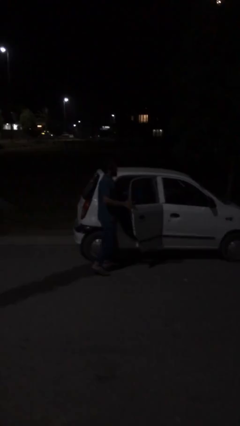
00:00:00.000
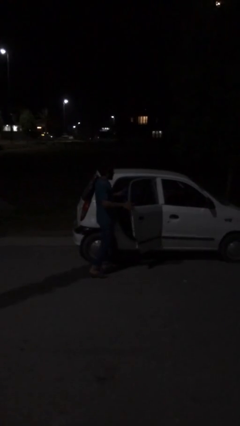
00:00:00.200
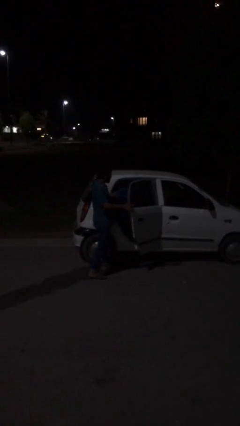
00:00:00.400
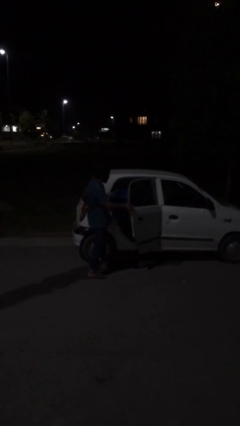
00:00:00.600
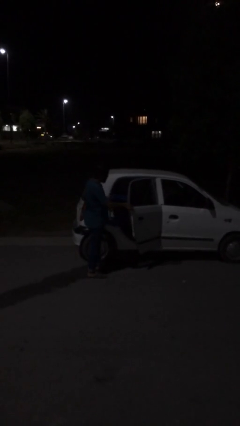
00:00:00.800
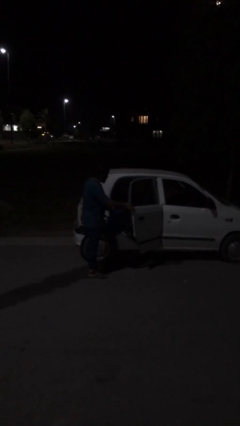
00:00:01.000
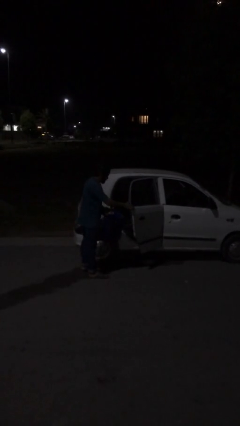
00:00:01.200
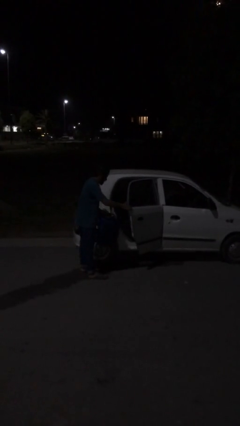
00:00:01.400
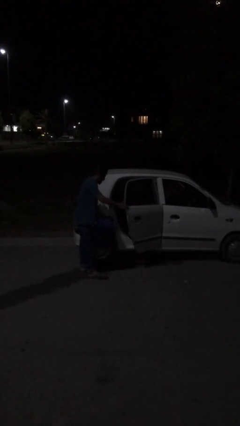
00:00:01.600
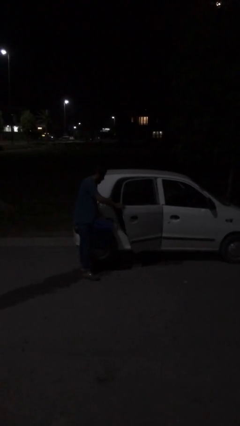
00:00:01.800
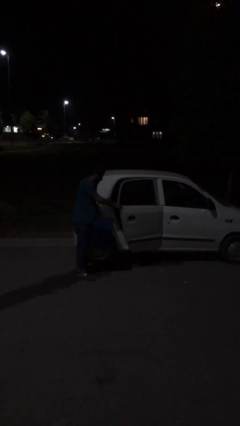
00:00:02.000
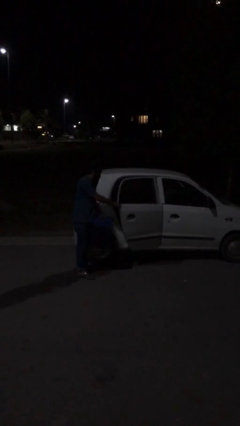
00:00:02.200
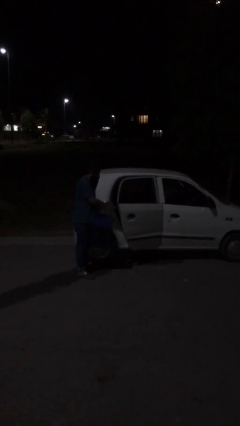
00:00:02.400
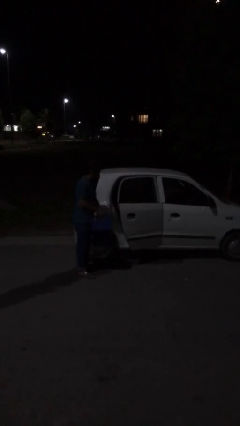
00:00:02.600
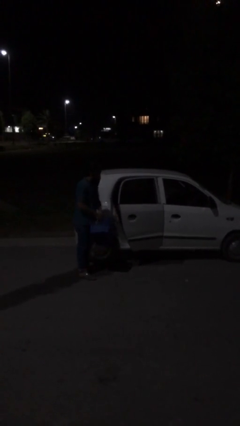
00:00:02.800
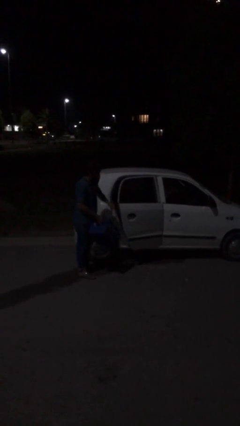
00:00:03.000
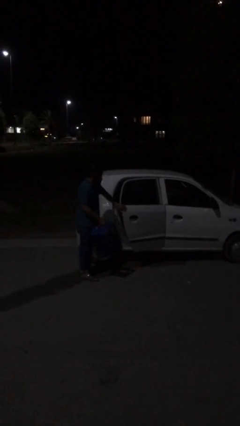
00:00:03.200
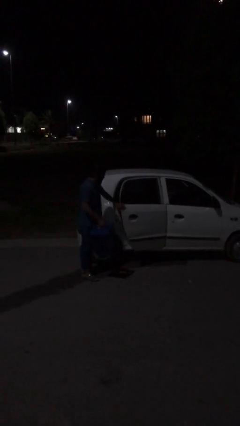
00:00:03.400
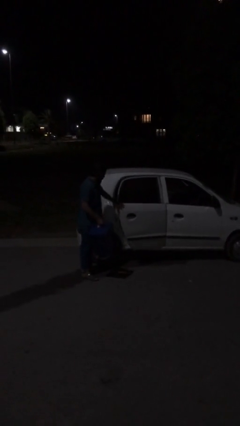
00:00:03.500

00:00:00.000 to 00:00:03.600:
person unloads car

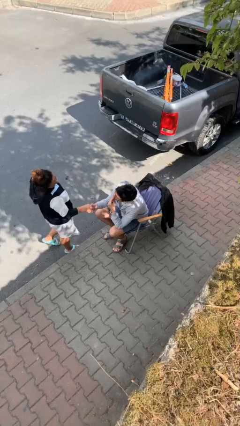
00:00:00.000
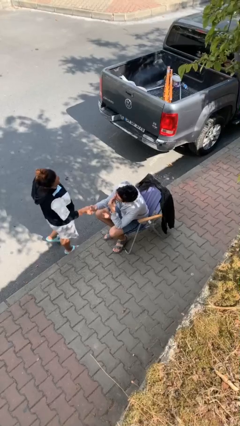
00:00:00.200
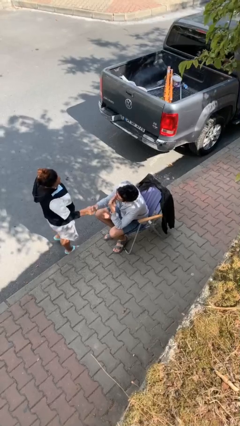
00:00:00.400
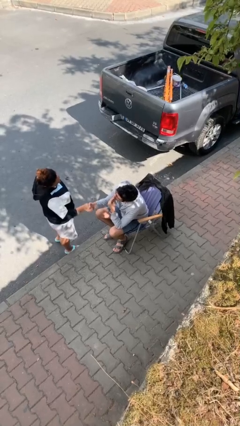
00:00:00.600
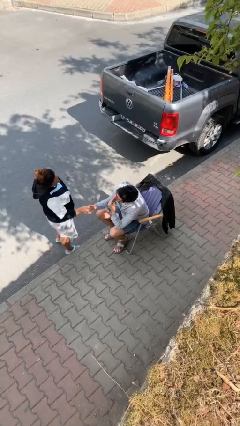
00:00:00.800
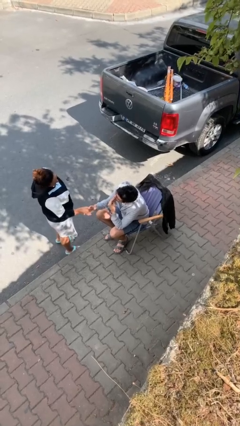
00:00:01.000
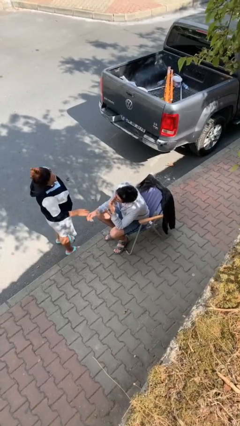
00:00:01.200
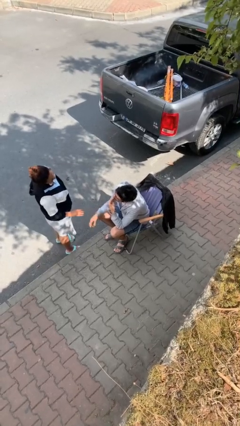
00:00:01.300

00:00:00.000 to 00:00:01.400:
person shakes hand

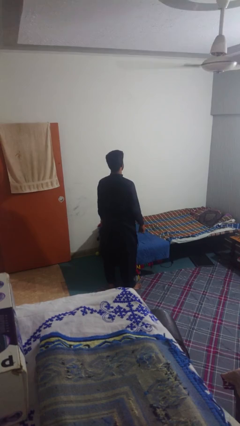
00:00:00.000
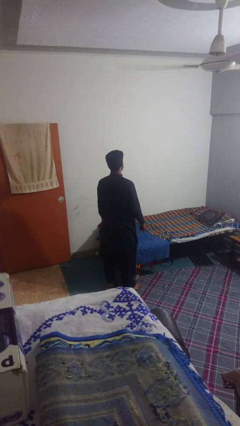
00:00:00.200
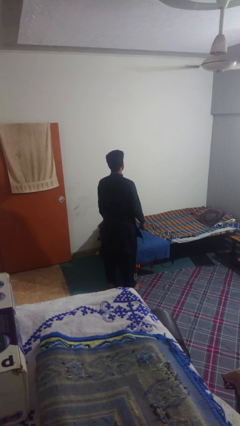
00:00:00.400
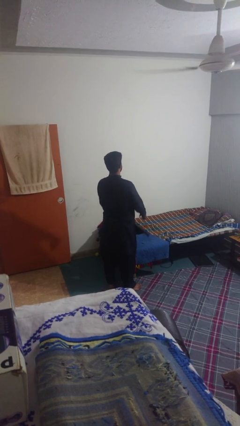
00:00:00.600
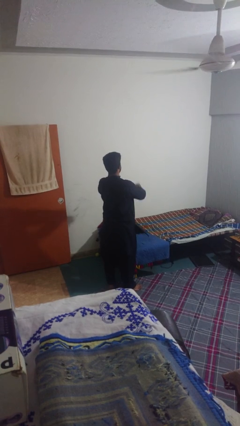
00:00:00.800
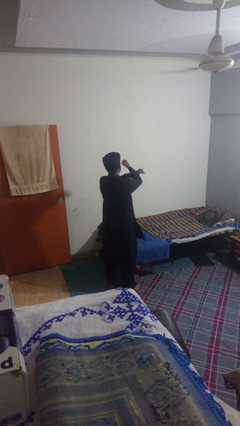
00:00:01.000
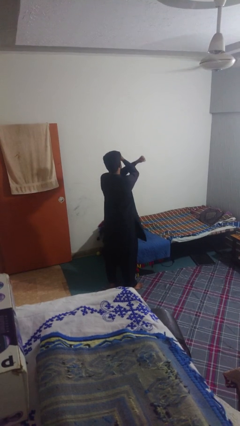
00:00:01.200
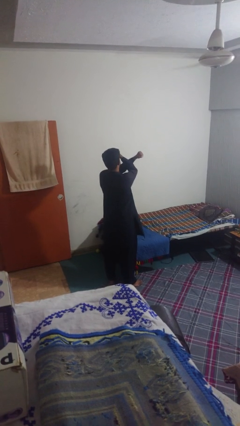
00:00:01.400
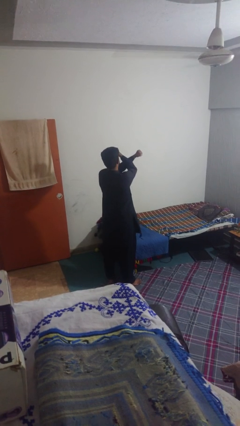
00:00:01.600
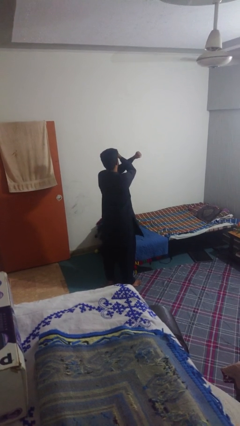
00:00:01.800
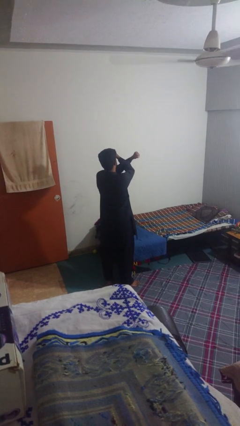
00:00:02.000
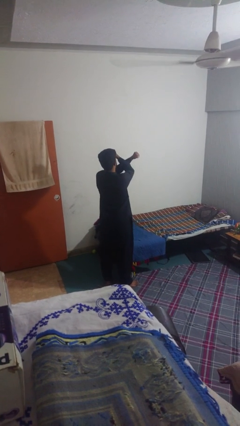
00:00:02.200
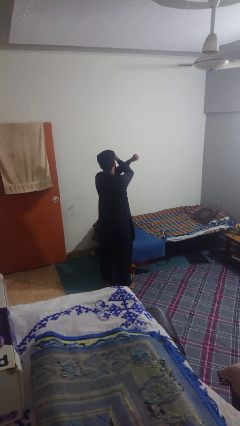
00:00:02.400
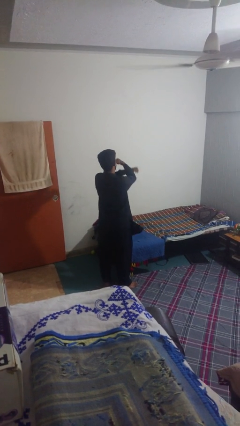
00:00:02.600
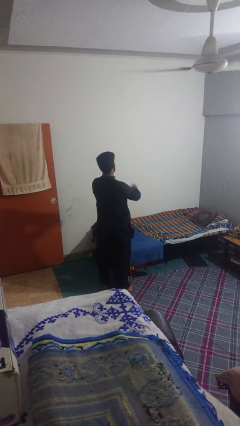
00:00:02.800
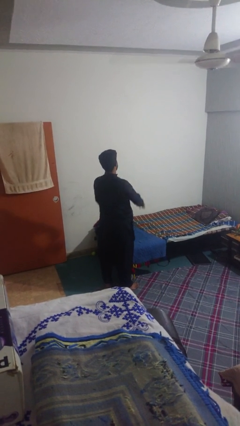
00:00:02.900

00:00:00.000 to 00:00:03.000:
person gestures arms x

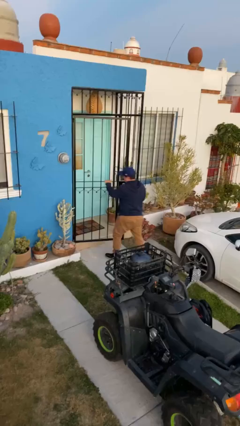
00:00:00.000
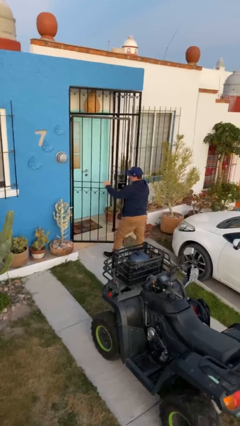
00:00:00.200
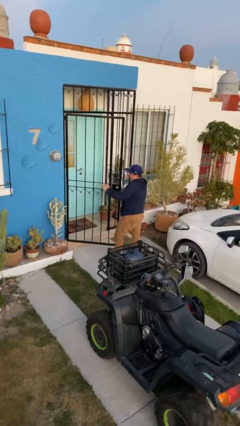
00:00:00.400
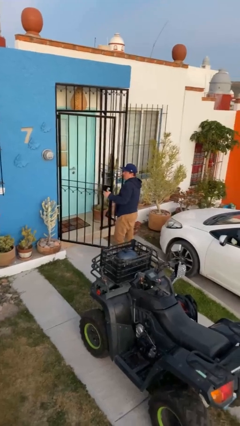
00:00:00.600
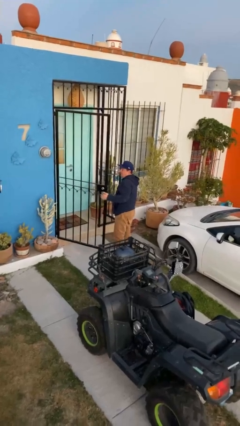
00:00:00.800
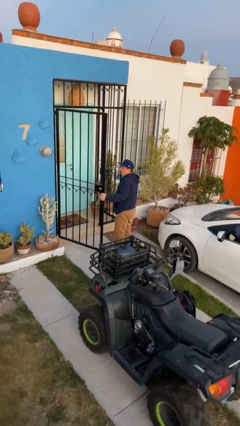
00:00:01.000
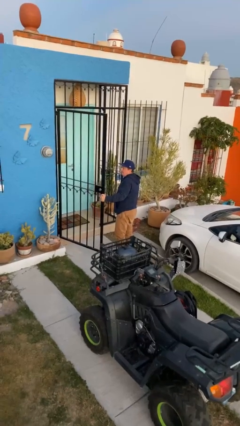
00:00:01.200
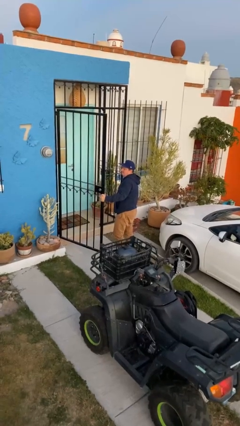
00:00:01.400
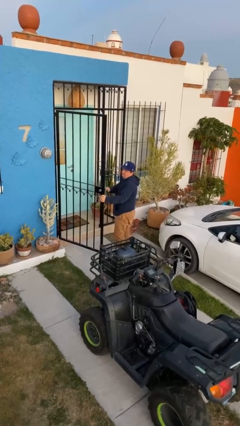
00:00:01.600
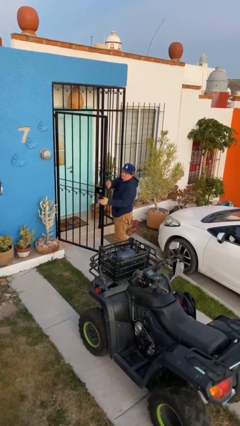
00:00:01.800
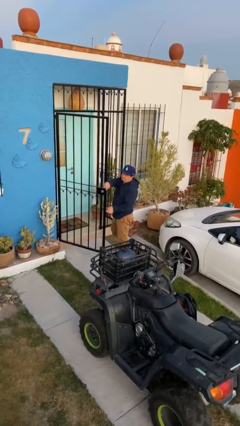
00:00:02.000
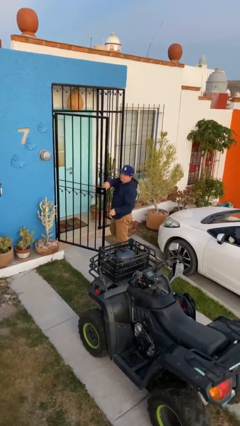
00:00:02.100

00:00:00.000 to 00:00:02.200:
person opens facility door

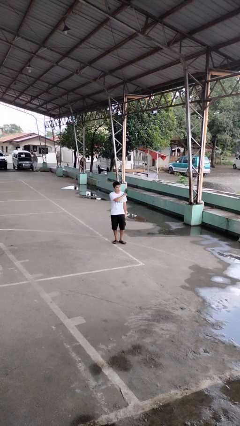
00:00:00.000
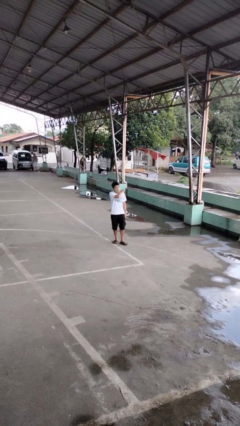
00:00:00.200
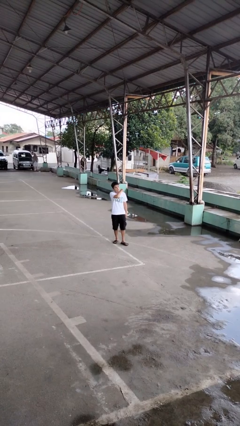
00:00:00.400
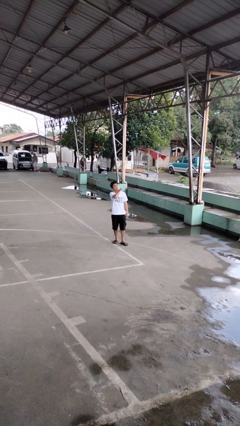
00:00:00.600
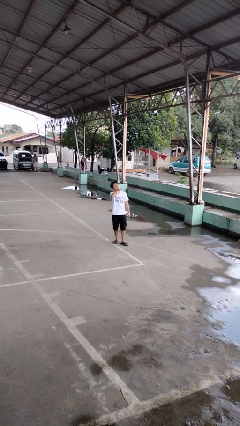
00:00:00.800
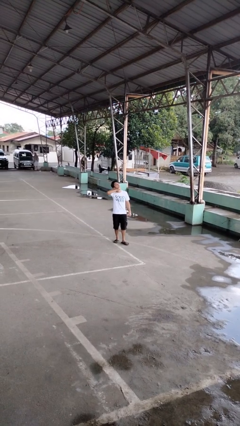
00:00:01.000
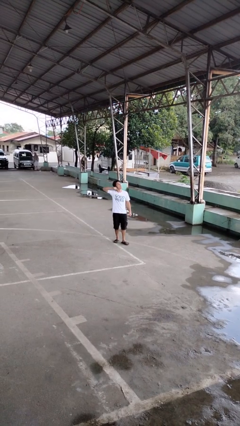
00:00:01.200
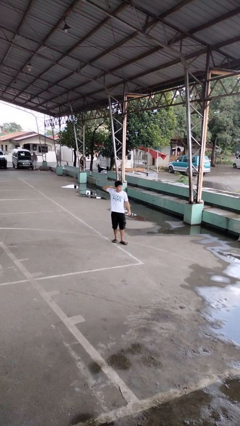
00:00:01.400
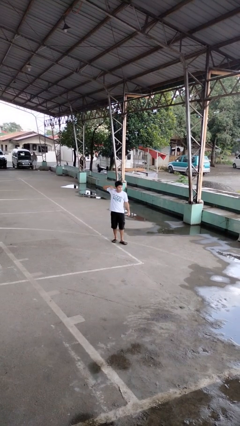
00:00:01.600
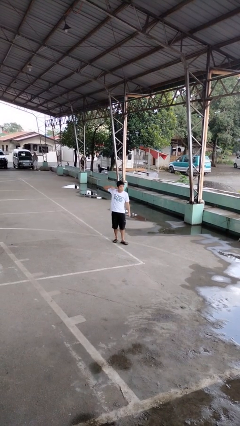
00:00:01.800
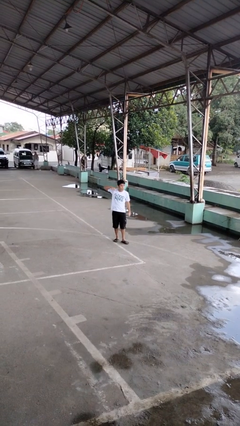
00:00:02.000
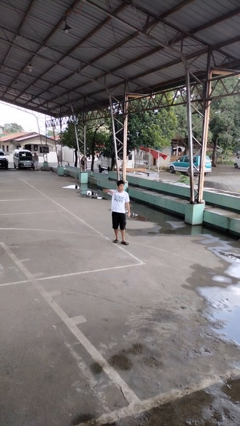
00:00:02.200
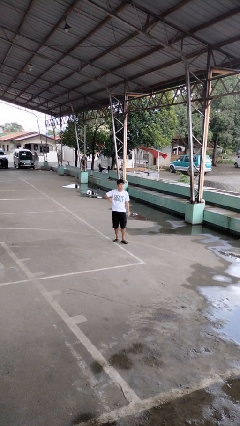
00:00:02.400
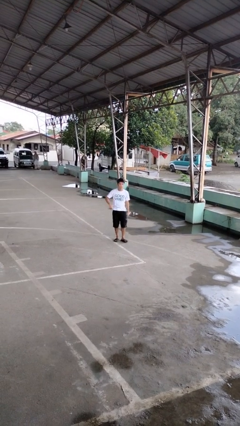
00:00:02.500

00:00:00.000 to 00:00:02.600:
person gestures cut

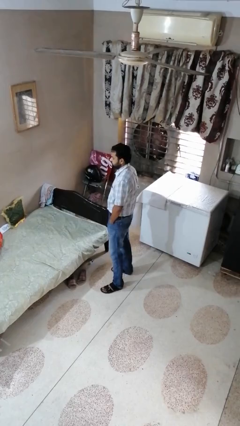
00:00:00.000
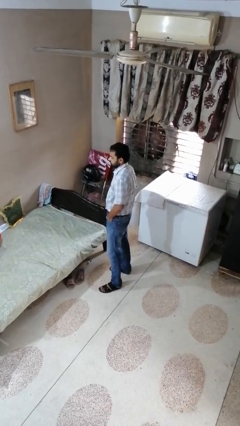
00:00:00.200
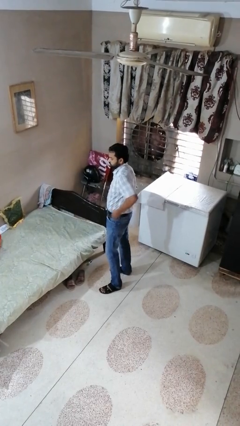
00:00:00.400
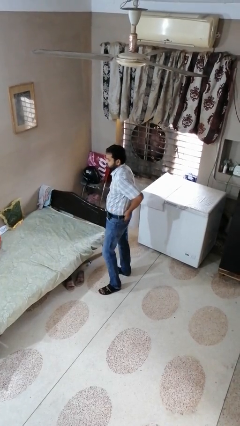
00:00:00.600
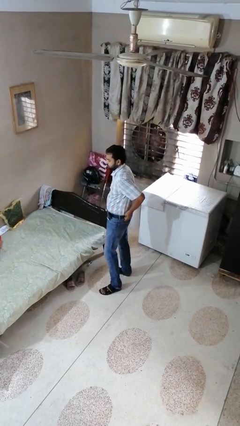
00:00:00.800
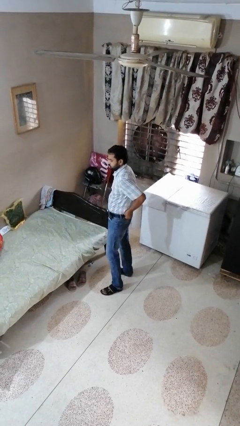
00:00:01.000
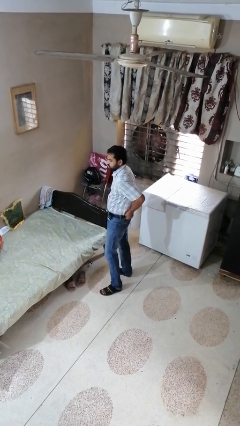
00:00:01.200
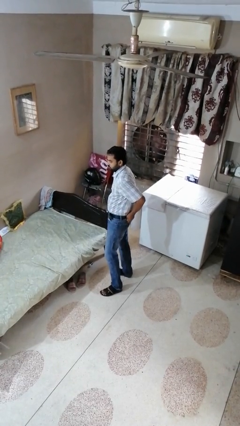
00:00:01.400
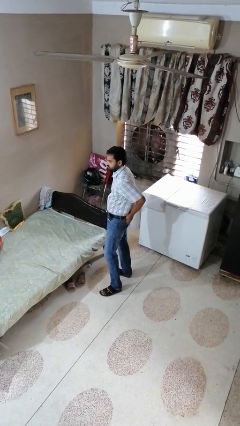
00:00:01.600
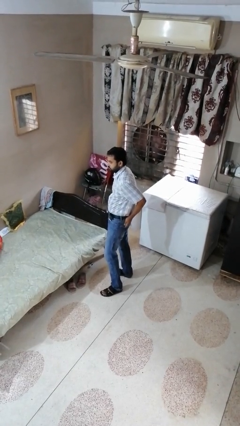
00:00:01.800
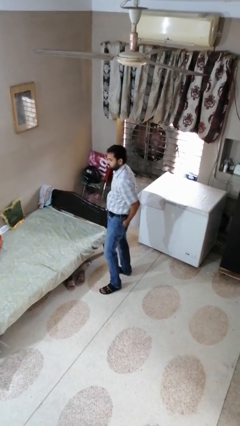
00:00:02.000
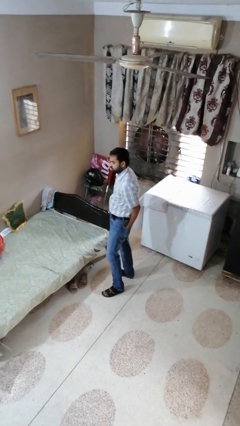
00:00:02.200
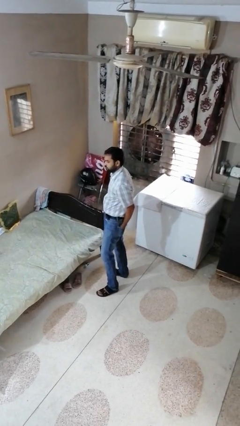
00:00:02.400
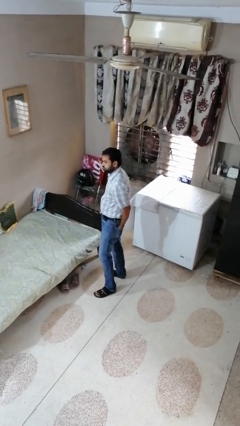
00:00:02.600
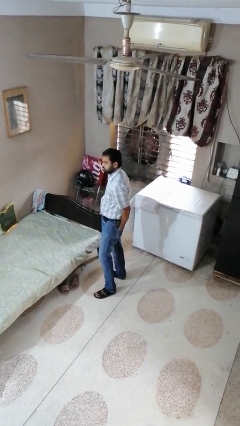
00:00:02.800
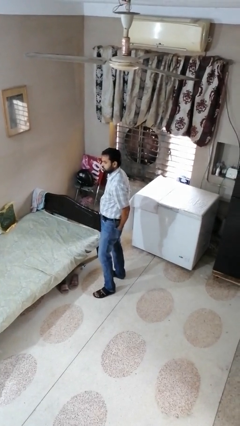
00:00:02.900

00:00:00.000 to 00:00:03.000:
person puts hands in back pockets

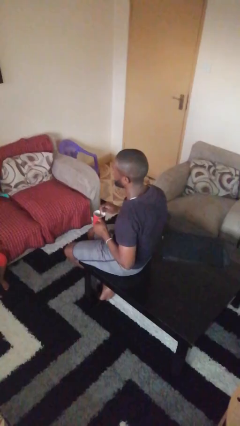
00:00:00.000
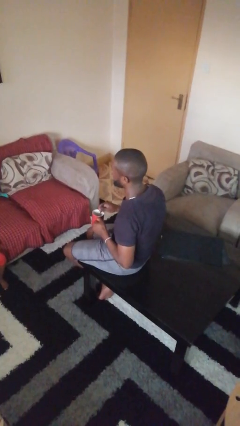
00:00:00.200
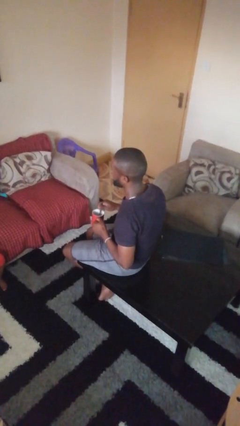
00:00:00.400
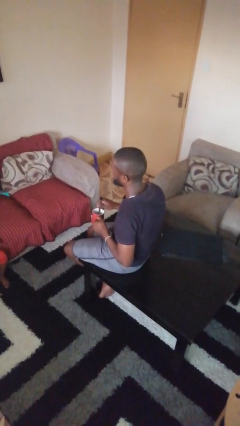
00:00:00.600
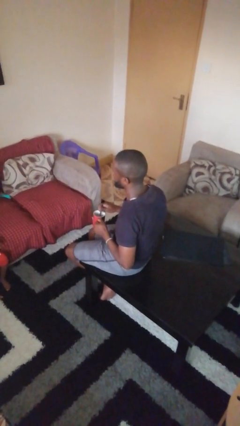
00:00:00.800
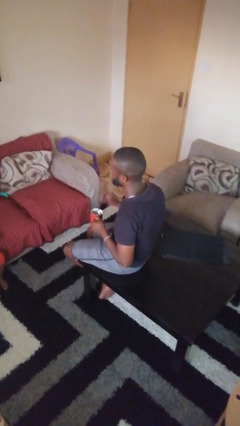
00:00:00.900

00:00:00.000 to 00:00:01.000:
person stirs mug
